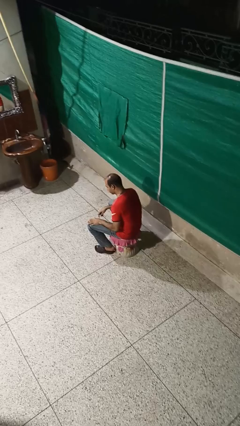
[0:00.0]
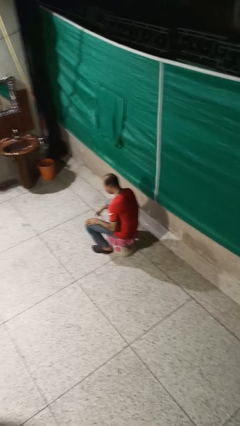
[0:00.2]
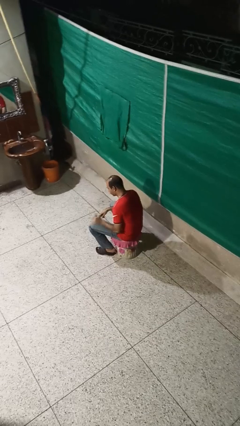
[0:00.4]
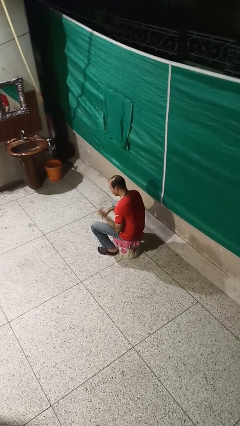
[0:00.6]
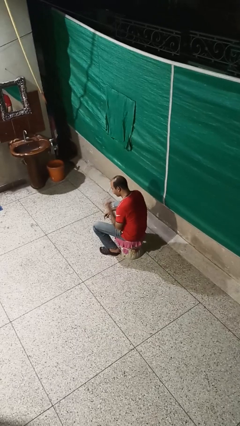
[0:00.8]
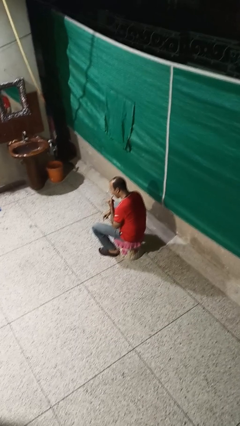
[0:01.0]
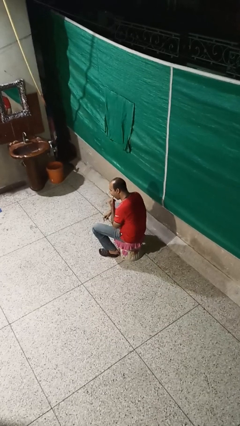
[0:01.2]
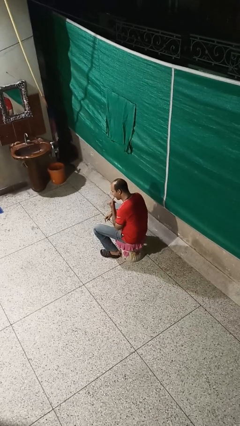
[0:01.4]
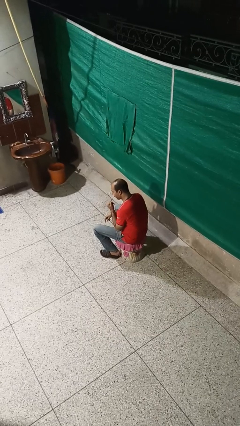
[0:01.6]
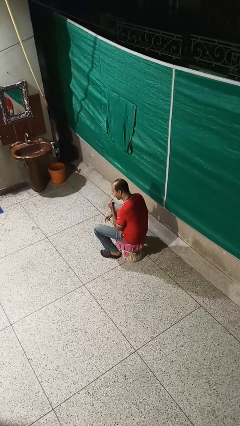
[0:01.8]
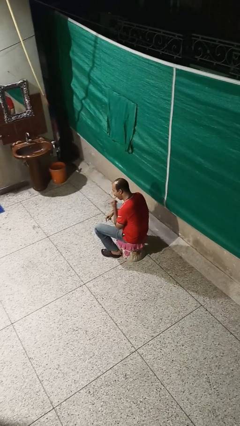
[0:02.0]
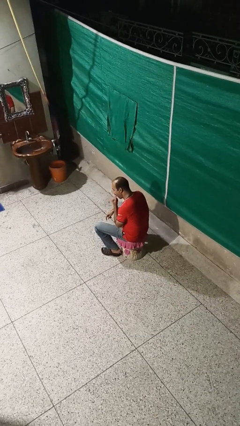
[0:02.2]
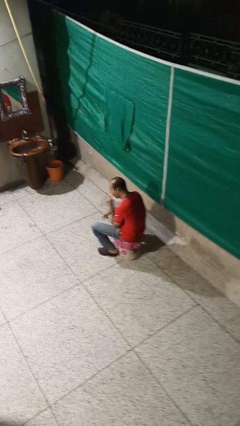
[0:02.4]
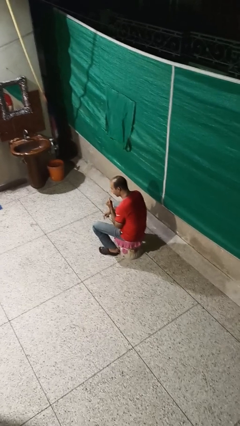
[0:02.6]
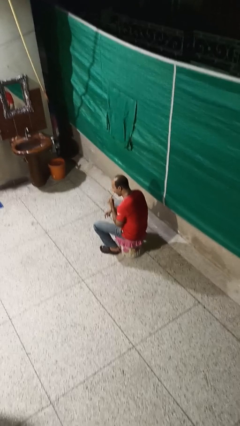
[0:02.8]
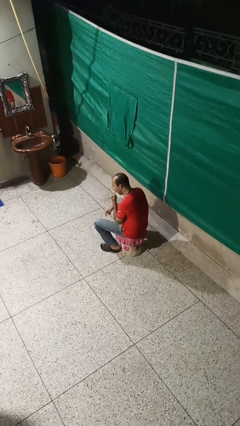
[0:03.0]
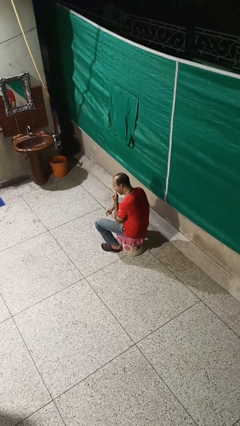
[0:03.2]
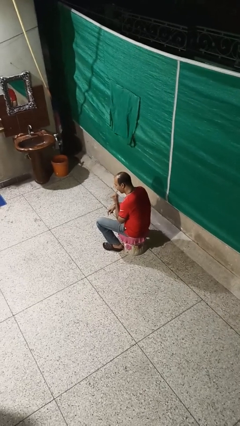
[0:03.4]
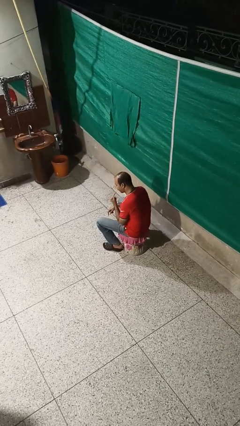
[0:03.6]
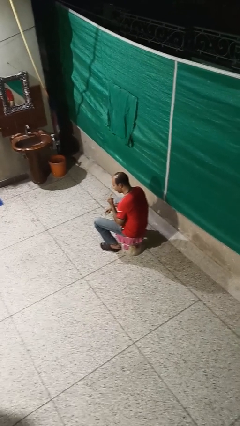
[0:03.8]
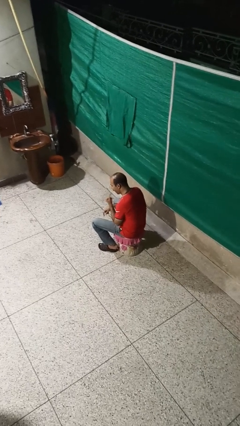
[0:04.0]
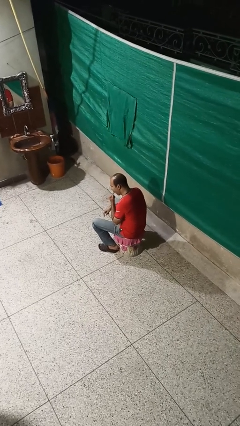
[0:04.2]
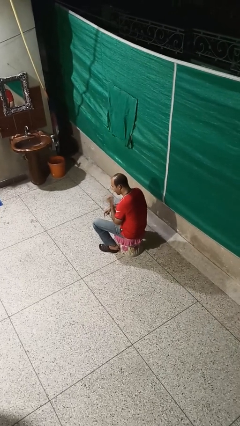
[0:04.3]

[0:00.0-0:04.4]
person licks fingers

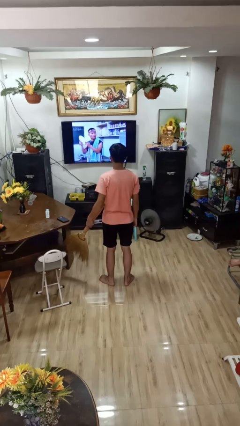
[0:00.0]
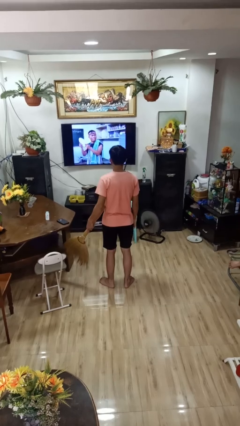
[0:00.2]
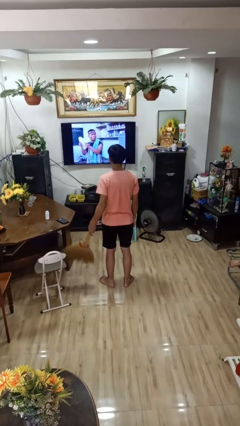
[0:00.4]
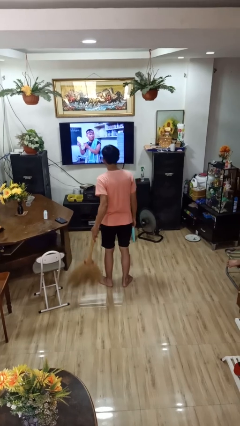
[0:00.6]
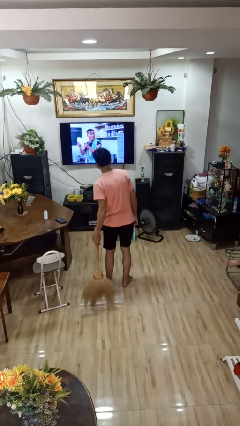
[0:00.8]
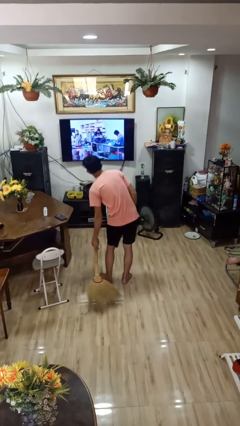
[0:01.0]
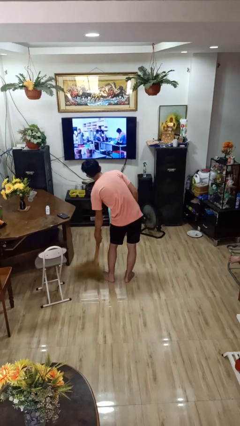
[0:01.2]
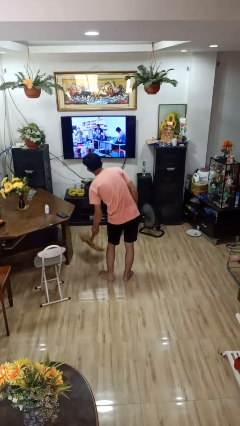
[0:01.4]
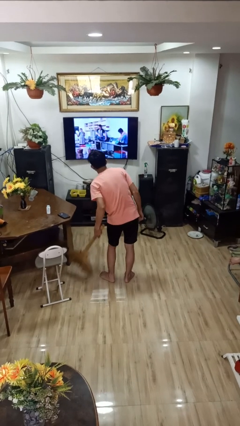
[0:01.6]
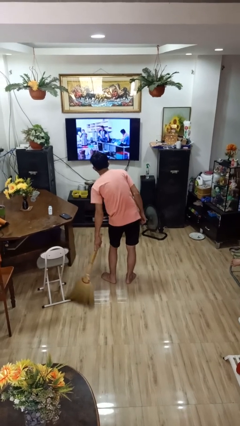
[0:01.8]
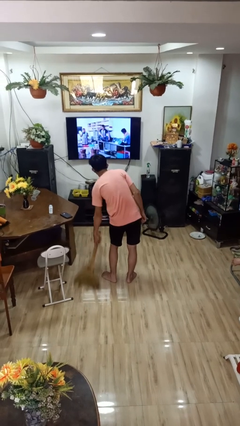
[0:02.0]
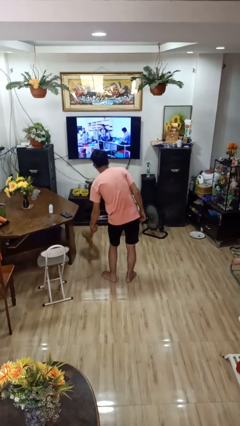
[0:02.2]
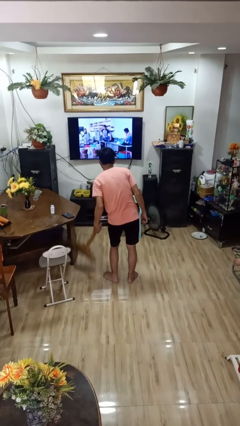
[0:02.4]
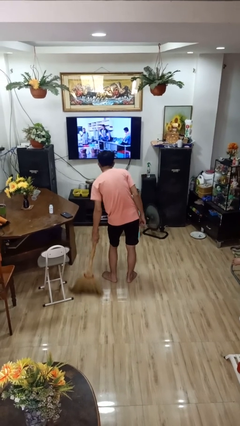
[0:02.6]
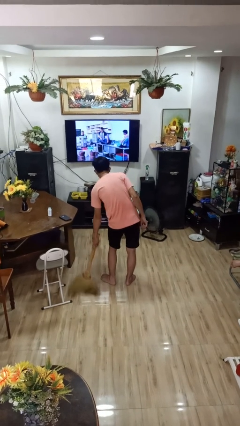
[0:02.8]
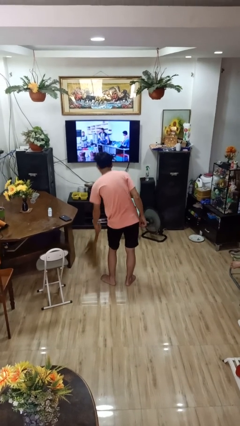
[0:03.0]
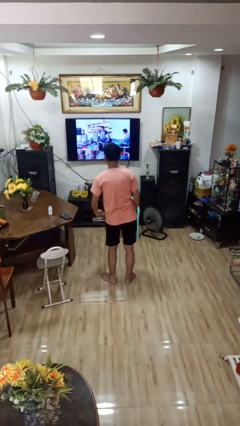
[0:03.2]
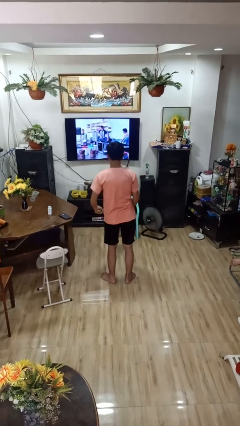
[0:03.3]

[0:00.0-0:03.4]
person sweeps floor

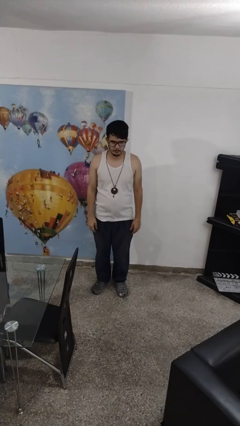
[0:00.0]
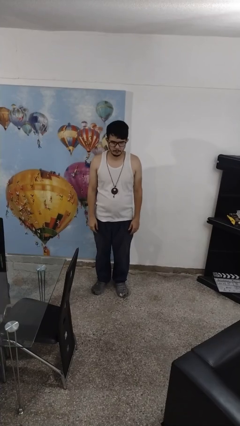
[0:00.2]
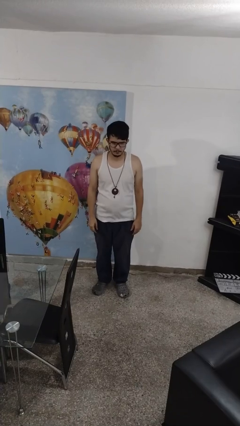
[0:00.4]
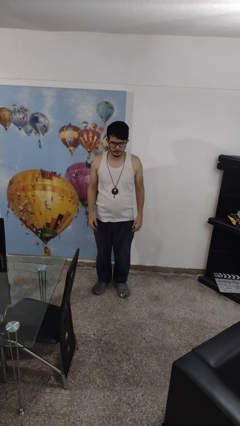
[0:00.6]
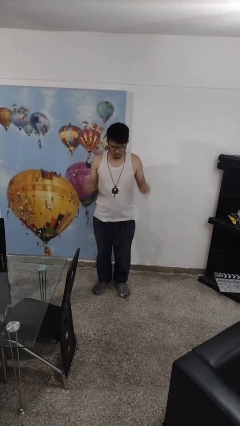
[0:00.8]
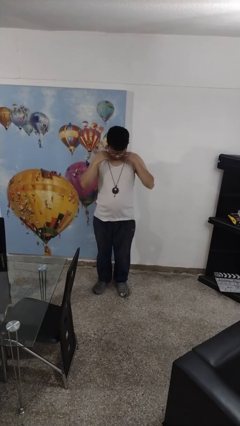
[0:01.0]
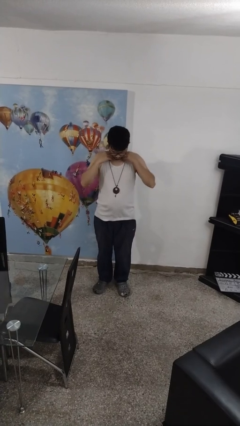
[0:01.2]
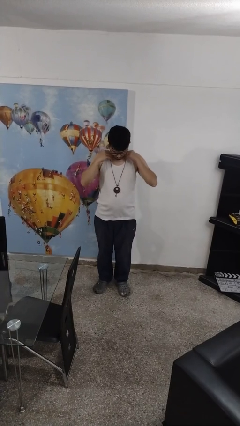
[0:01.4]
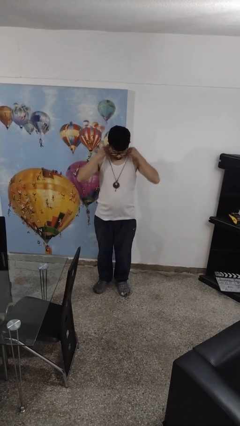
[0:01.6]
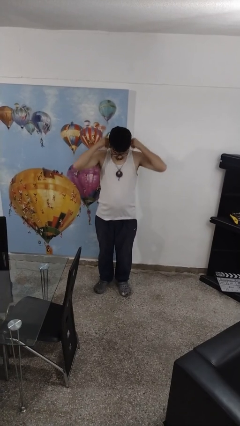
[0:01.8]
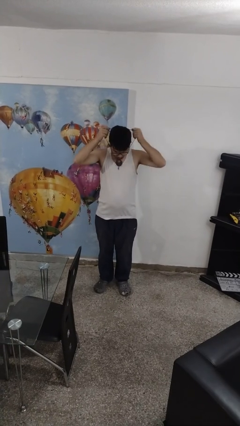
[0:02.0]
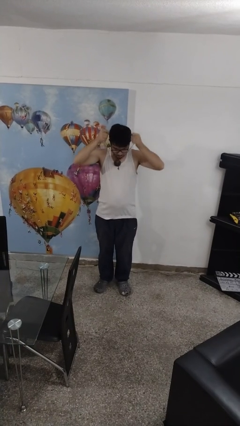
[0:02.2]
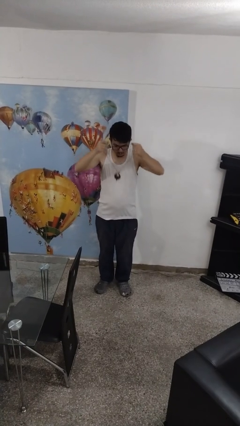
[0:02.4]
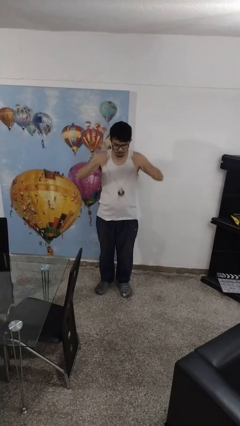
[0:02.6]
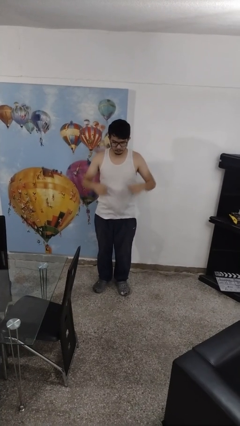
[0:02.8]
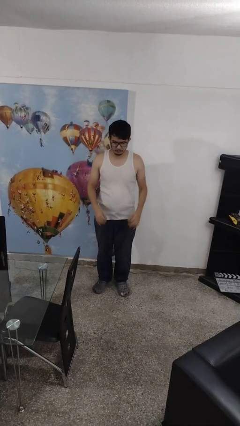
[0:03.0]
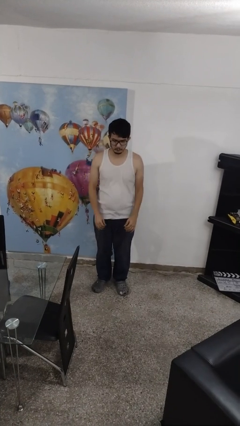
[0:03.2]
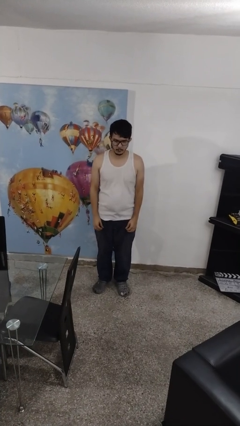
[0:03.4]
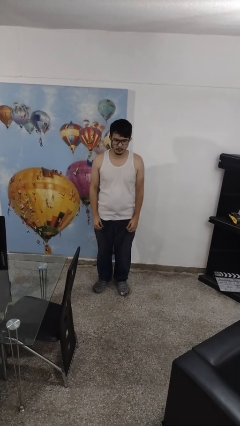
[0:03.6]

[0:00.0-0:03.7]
person takes off necklace

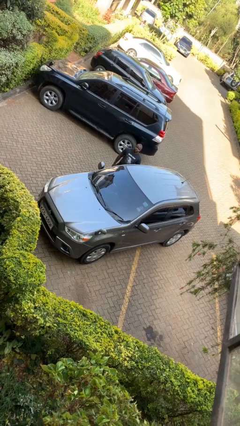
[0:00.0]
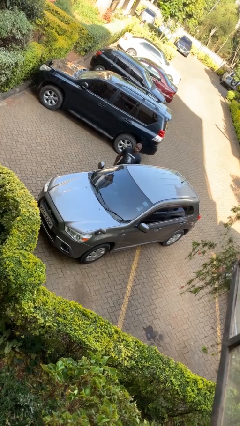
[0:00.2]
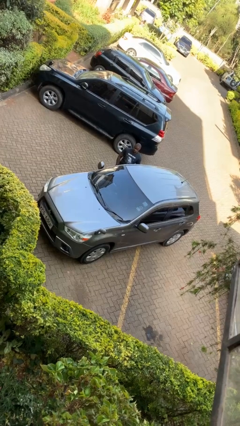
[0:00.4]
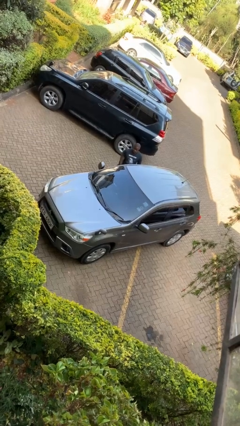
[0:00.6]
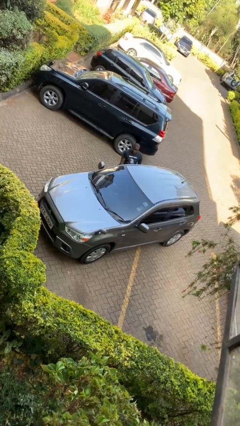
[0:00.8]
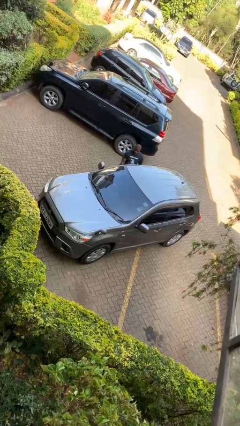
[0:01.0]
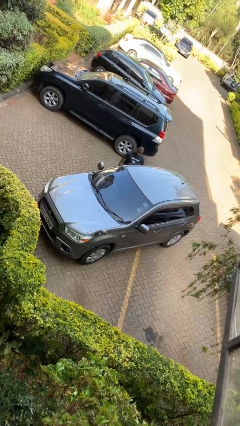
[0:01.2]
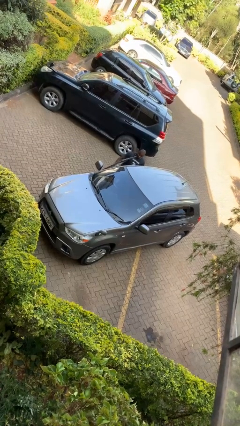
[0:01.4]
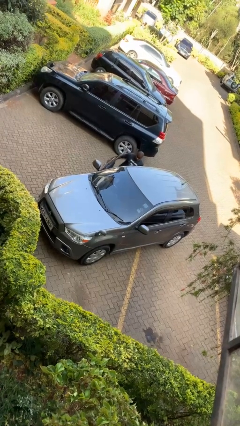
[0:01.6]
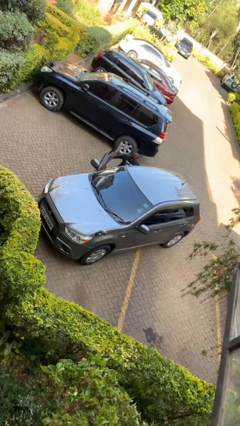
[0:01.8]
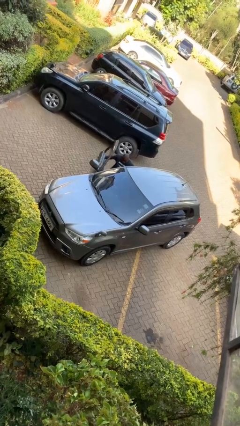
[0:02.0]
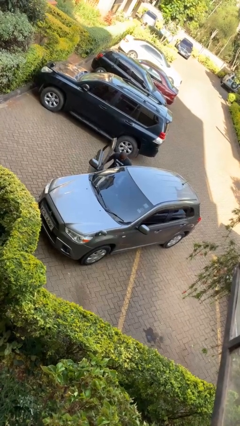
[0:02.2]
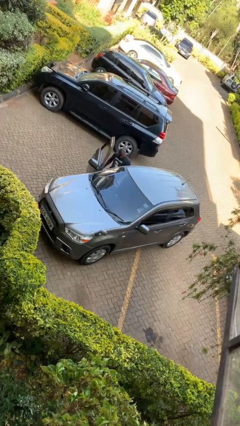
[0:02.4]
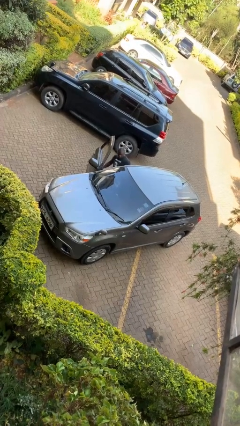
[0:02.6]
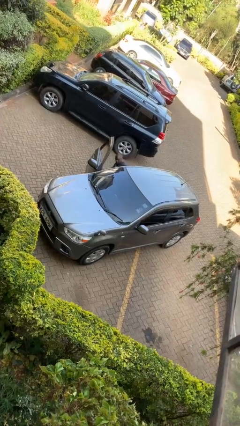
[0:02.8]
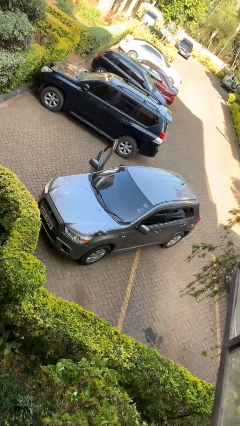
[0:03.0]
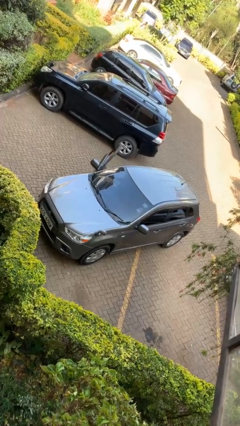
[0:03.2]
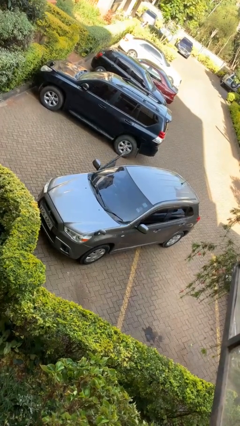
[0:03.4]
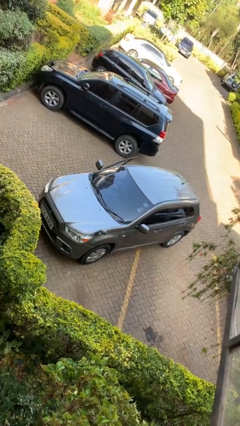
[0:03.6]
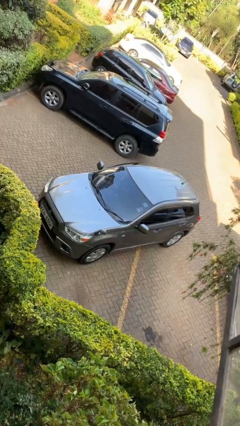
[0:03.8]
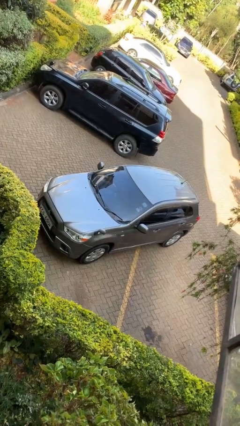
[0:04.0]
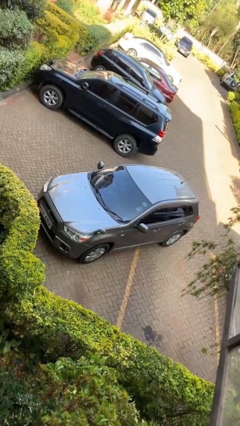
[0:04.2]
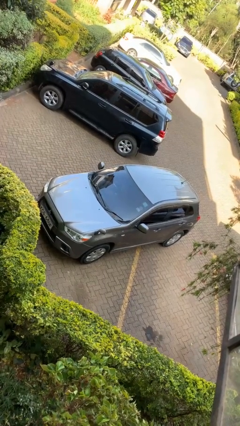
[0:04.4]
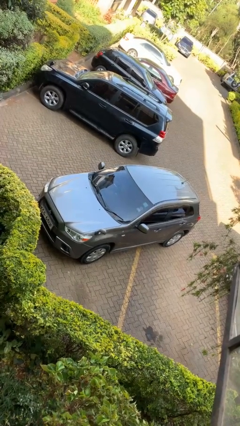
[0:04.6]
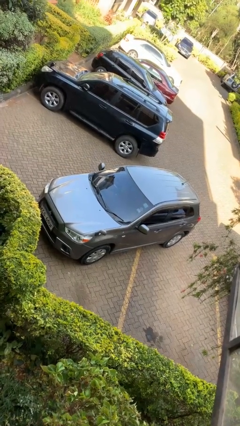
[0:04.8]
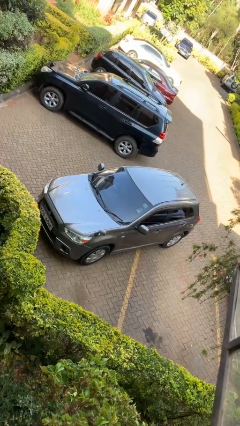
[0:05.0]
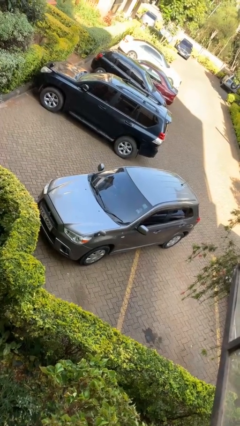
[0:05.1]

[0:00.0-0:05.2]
car picks up person

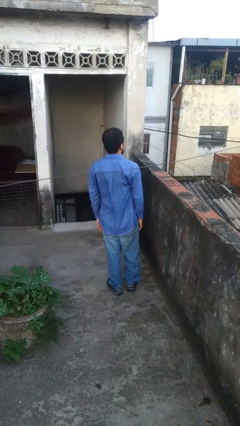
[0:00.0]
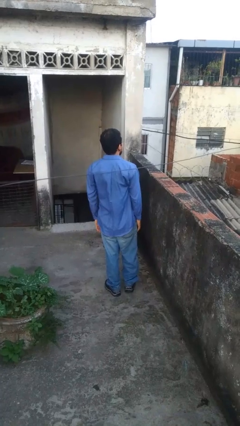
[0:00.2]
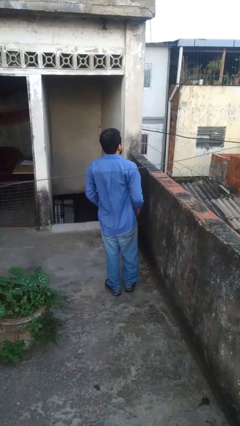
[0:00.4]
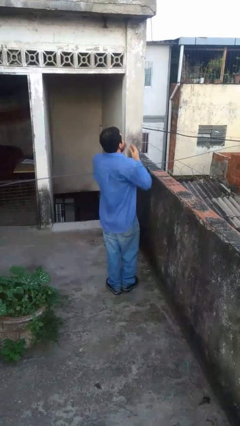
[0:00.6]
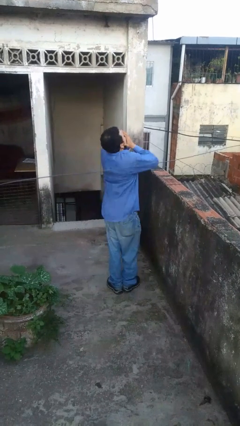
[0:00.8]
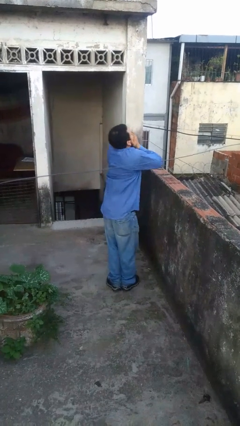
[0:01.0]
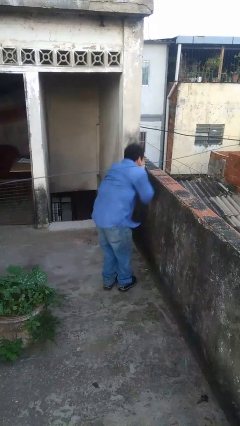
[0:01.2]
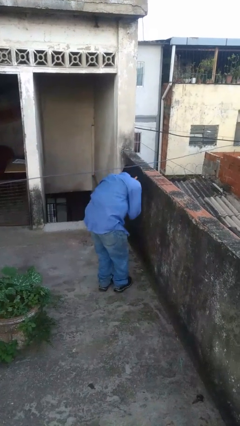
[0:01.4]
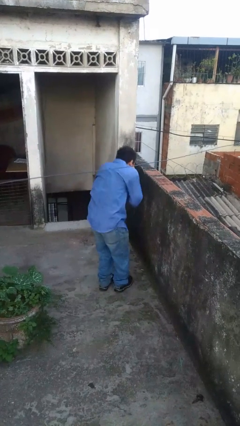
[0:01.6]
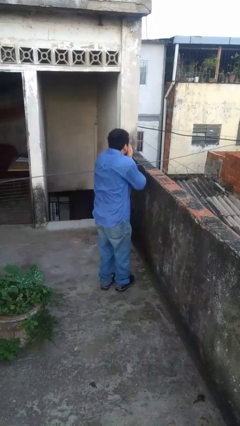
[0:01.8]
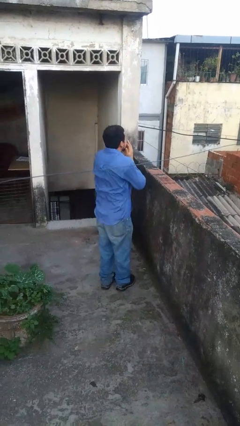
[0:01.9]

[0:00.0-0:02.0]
person sneezes into hand
